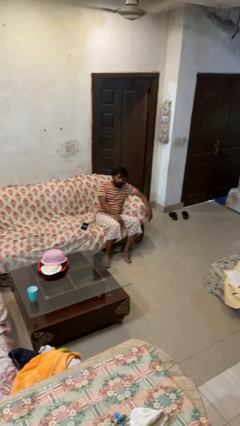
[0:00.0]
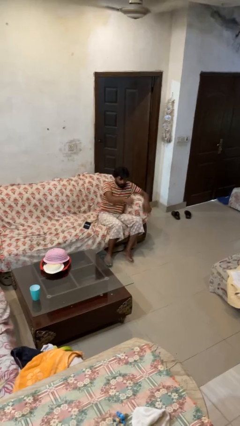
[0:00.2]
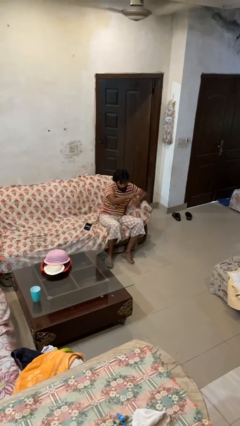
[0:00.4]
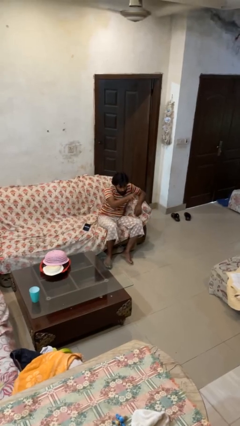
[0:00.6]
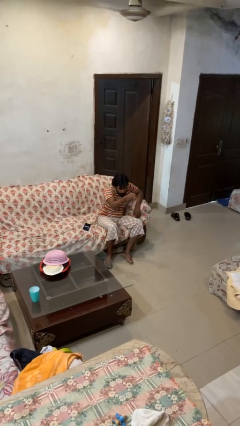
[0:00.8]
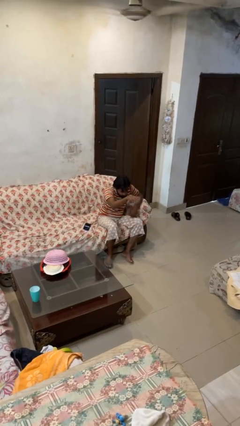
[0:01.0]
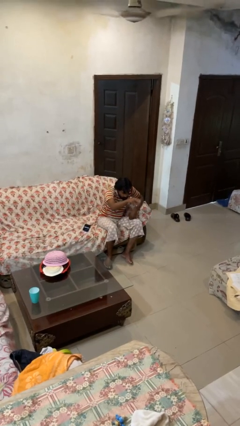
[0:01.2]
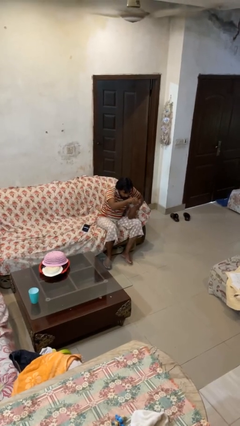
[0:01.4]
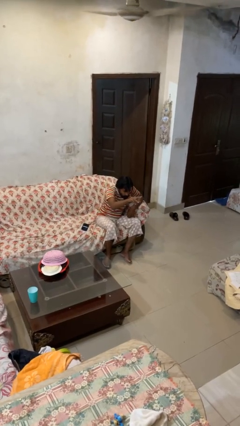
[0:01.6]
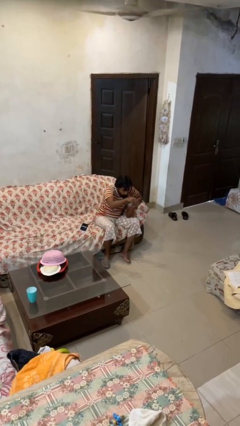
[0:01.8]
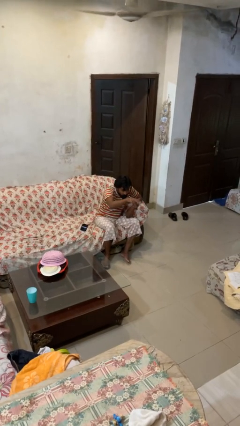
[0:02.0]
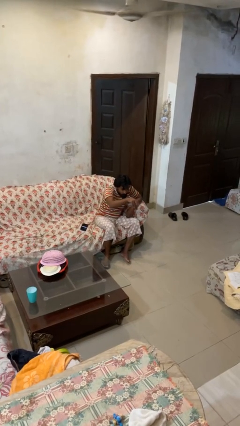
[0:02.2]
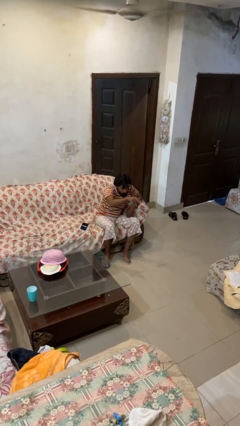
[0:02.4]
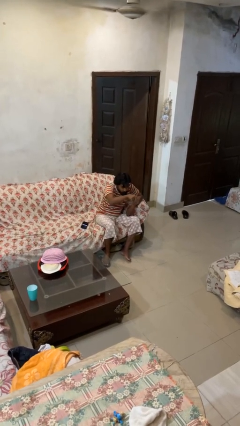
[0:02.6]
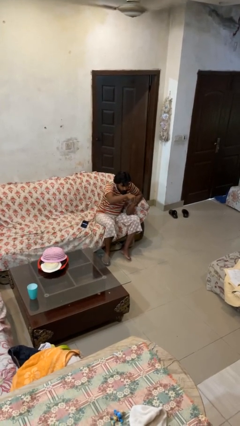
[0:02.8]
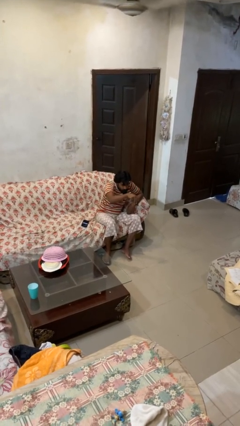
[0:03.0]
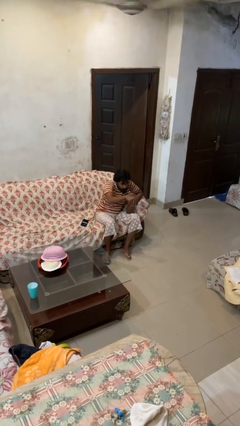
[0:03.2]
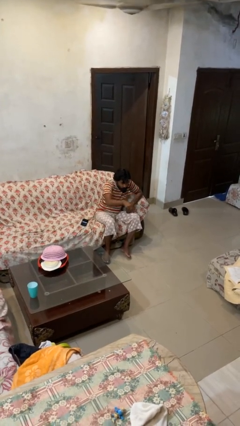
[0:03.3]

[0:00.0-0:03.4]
person gestures come here

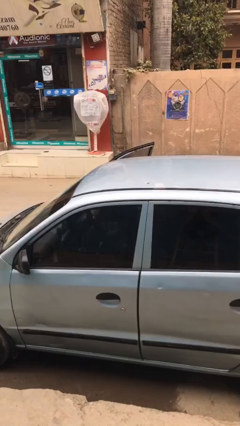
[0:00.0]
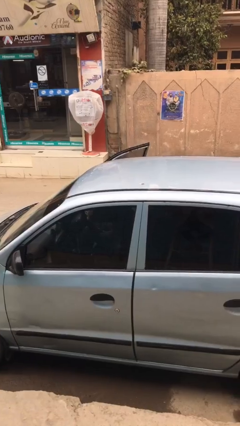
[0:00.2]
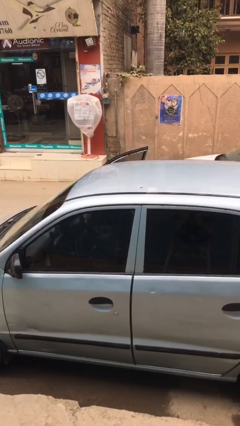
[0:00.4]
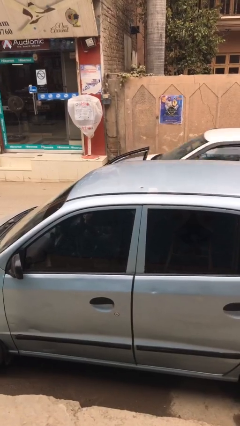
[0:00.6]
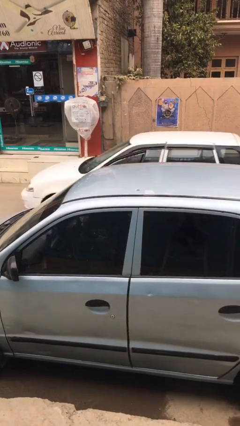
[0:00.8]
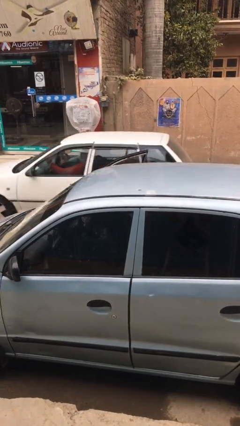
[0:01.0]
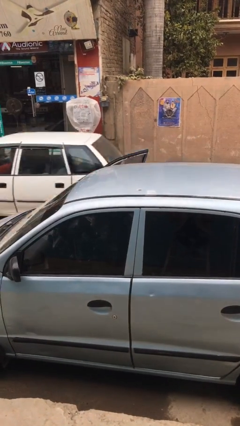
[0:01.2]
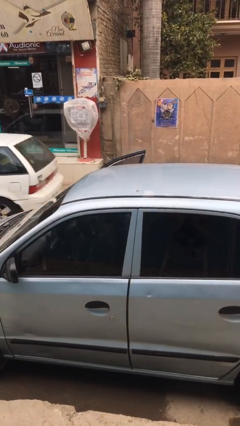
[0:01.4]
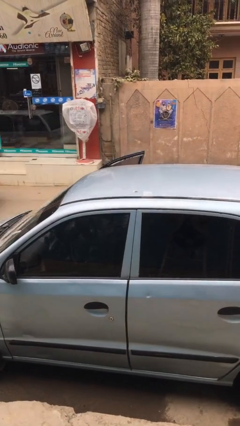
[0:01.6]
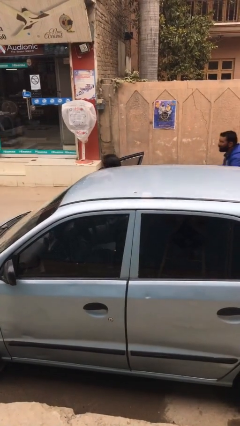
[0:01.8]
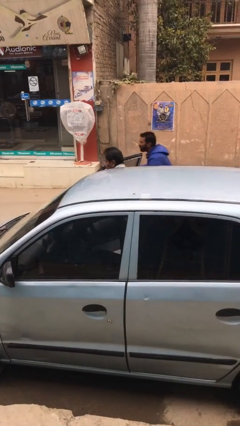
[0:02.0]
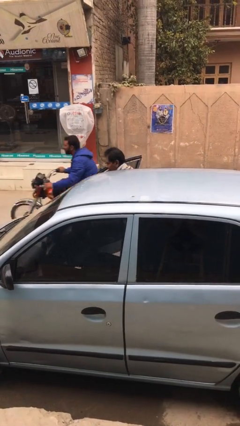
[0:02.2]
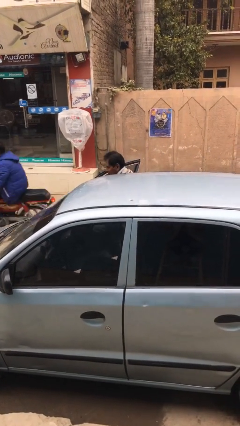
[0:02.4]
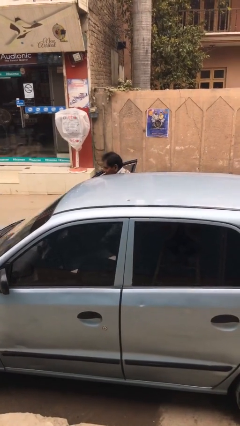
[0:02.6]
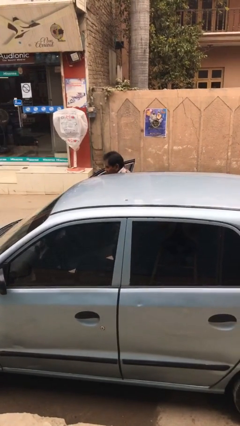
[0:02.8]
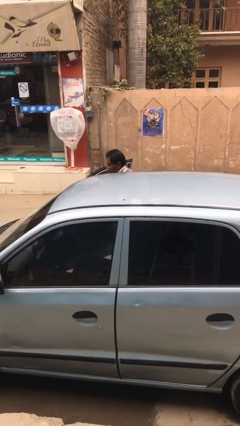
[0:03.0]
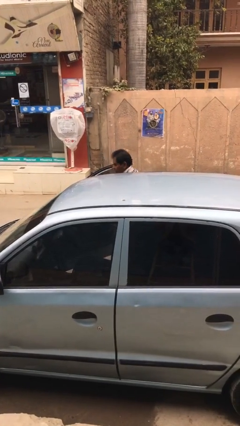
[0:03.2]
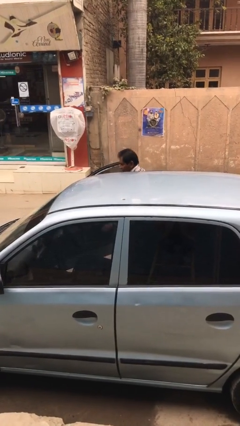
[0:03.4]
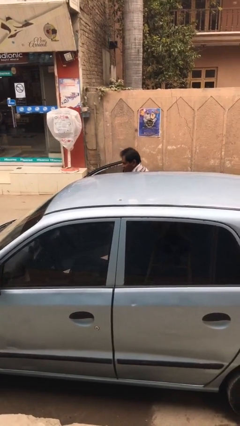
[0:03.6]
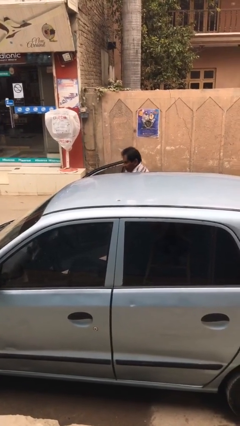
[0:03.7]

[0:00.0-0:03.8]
person exits car

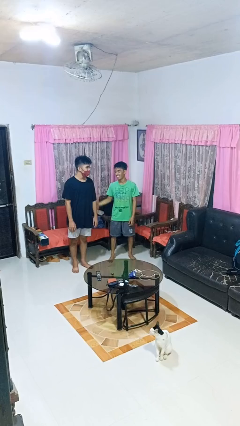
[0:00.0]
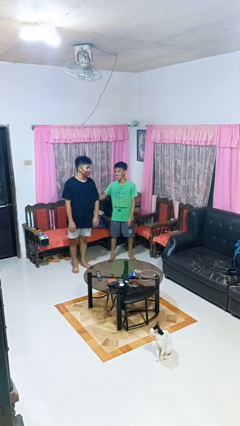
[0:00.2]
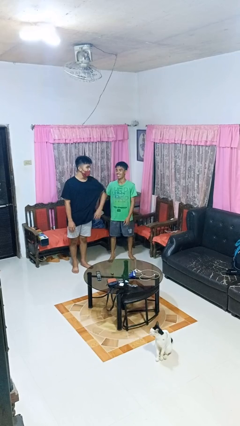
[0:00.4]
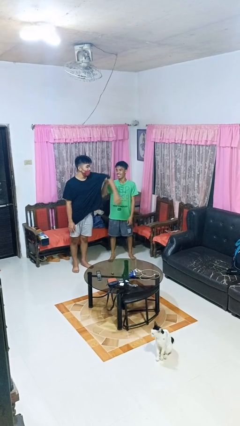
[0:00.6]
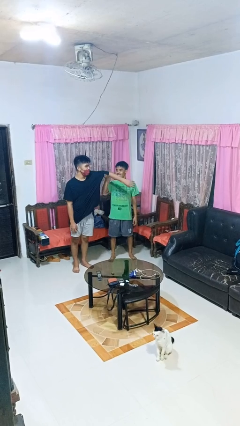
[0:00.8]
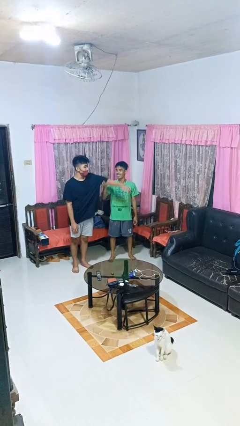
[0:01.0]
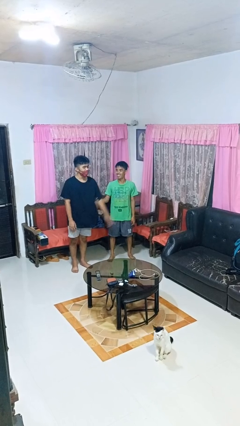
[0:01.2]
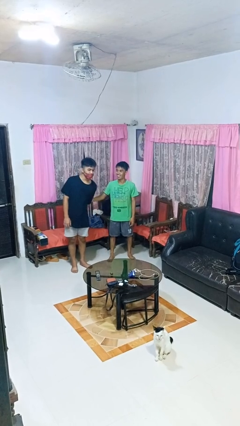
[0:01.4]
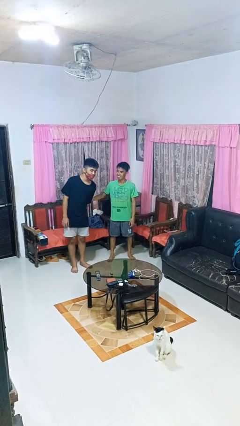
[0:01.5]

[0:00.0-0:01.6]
person grabs person by bicep

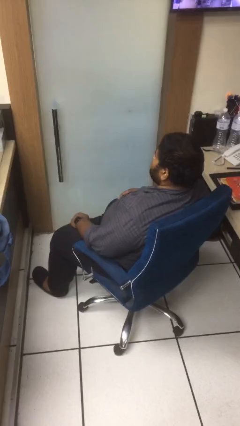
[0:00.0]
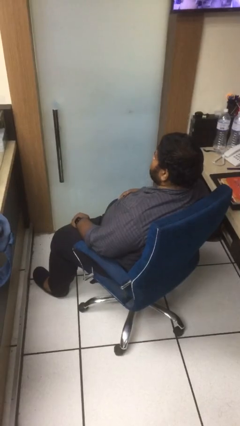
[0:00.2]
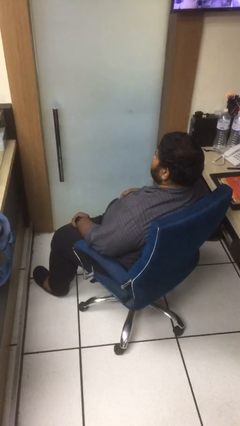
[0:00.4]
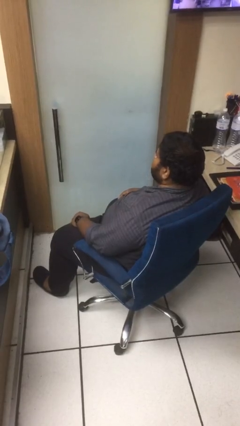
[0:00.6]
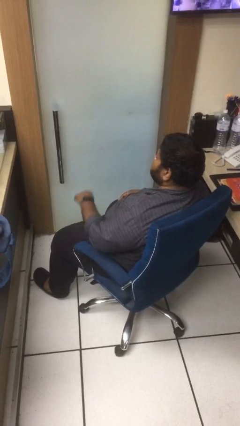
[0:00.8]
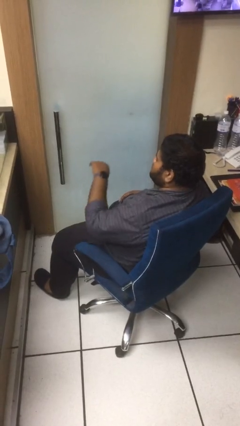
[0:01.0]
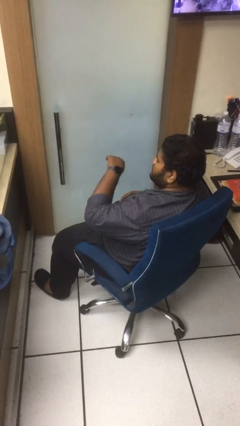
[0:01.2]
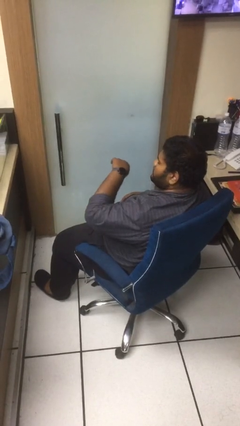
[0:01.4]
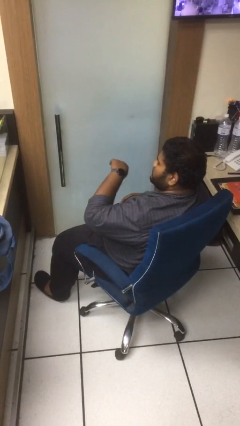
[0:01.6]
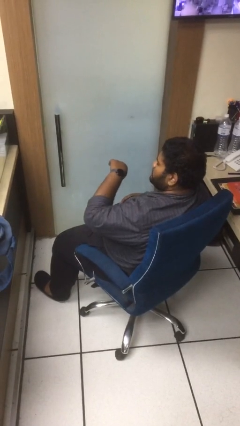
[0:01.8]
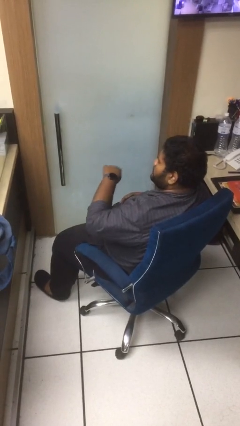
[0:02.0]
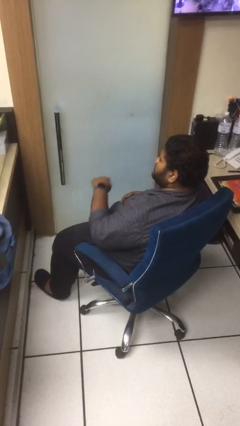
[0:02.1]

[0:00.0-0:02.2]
person looks at wristwatch

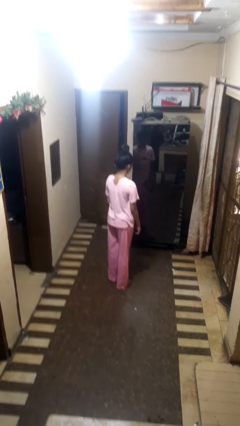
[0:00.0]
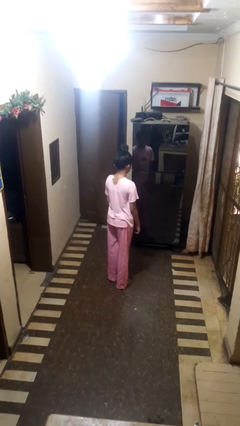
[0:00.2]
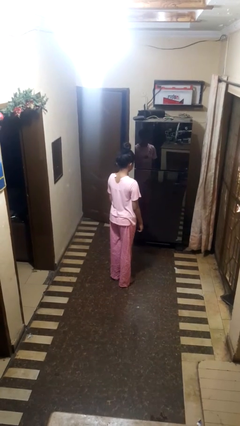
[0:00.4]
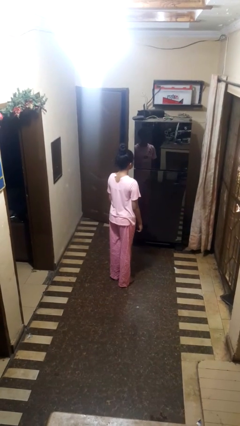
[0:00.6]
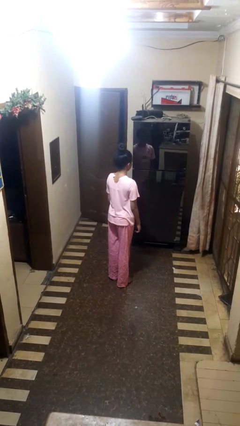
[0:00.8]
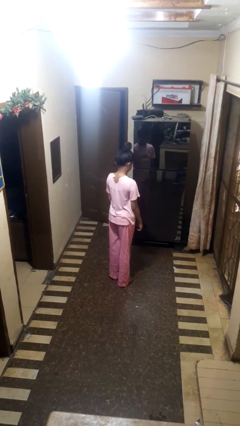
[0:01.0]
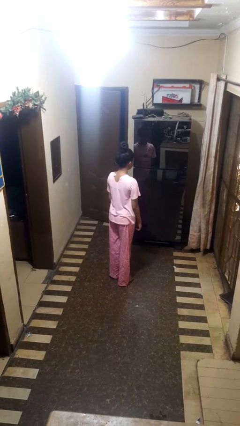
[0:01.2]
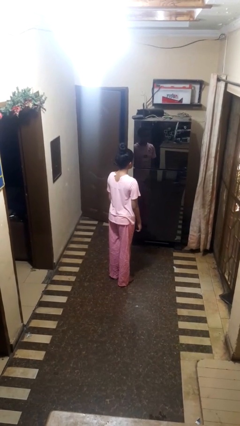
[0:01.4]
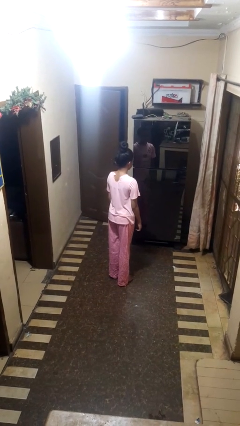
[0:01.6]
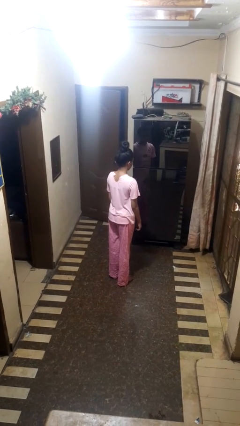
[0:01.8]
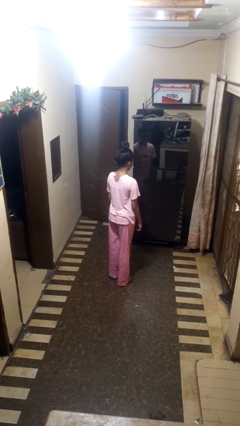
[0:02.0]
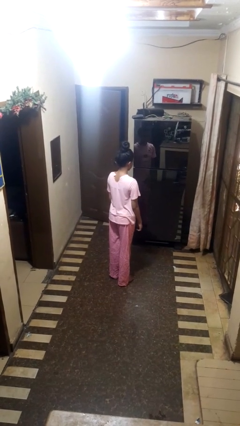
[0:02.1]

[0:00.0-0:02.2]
person shakes head

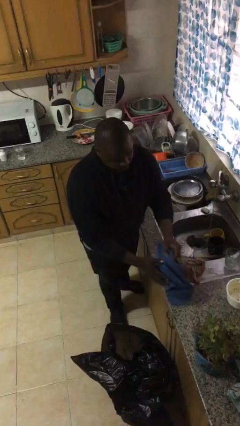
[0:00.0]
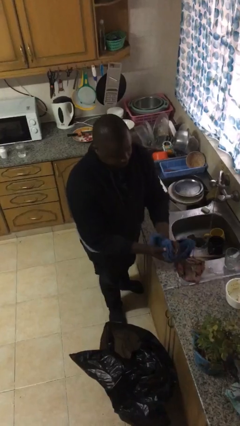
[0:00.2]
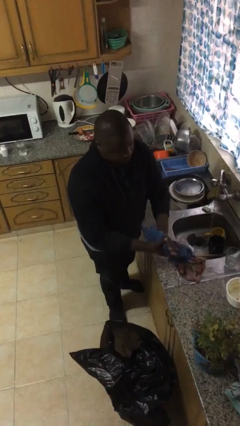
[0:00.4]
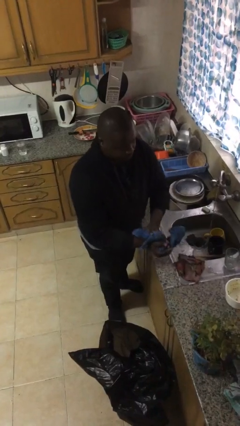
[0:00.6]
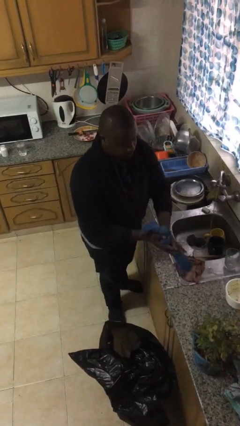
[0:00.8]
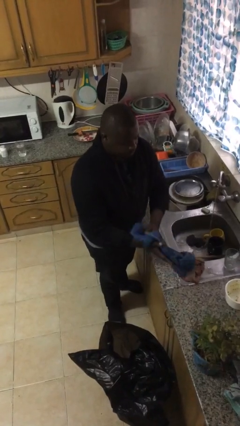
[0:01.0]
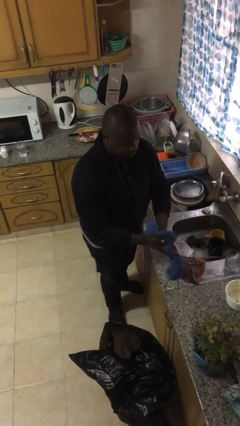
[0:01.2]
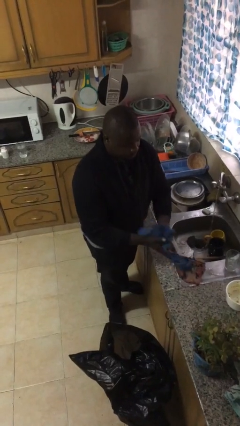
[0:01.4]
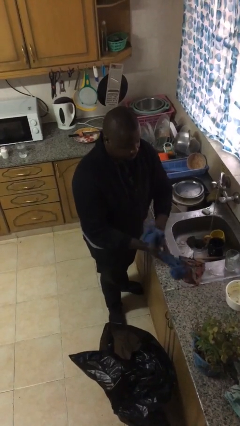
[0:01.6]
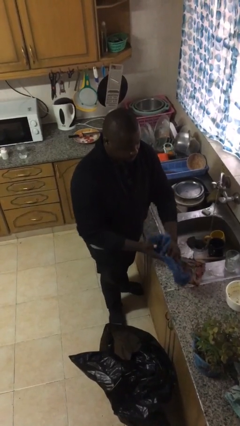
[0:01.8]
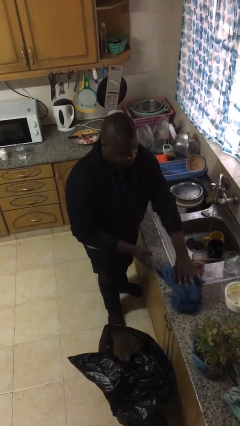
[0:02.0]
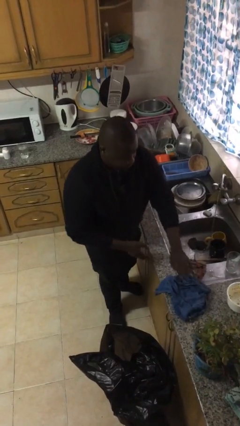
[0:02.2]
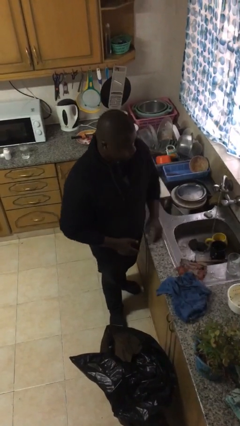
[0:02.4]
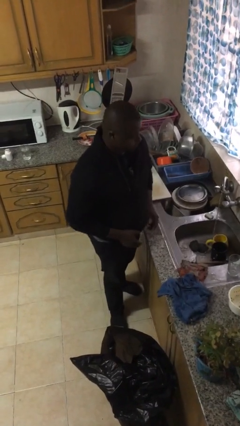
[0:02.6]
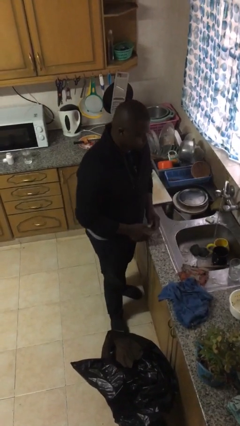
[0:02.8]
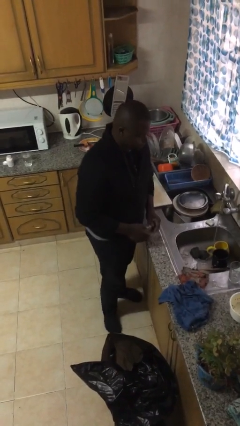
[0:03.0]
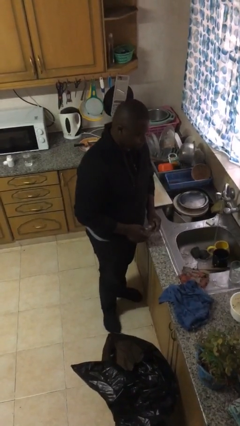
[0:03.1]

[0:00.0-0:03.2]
person dries hands with towel

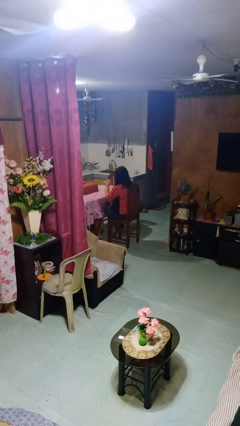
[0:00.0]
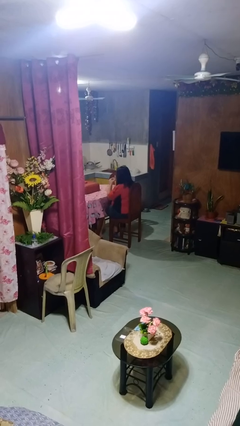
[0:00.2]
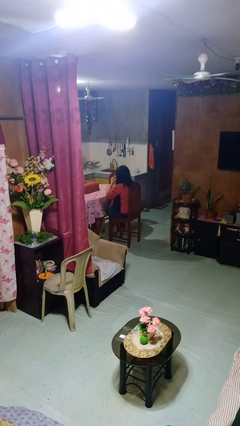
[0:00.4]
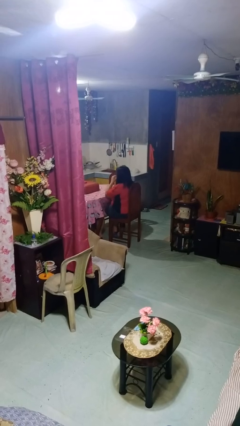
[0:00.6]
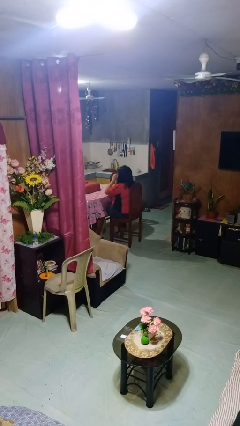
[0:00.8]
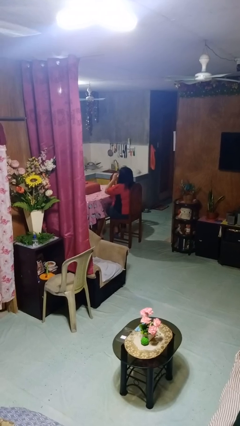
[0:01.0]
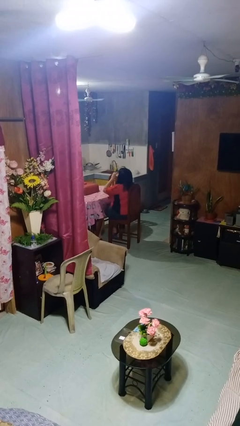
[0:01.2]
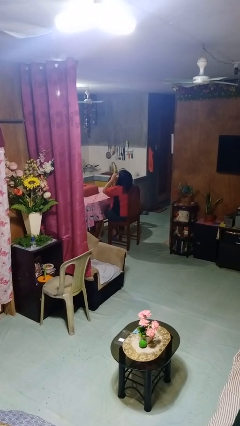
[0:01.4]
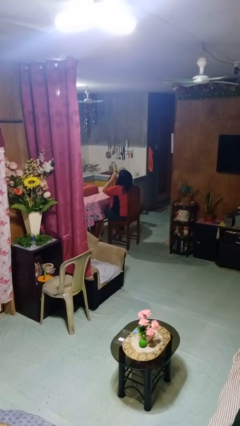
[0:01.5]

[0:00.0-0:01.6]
person drinks from shotglass
